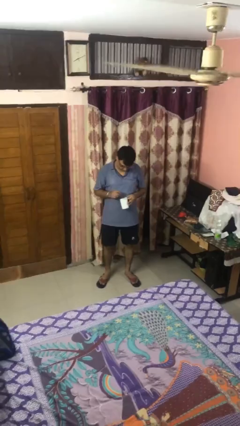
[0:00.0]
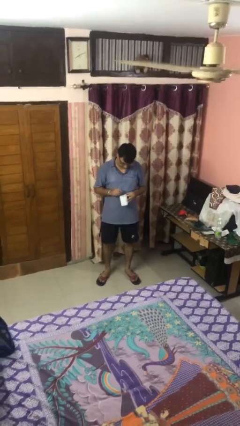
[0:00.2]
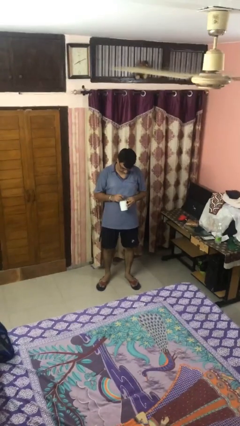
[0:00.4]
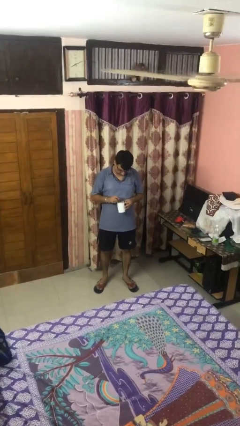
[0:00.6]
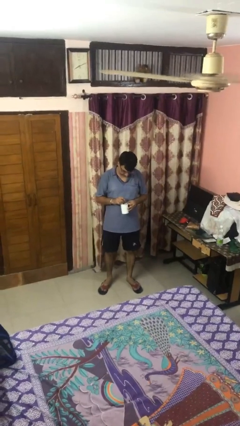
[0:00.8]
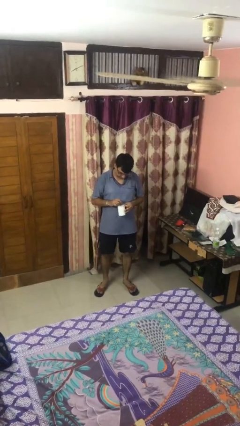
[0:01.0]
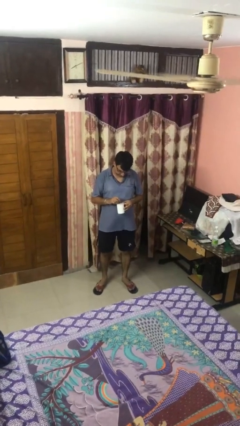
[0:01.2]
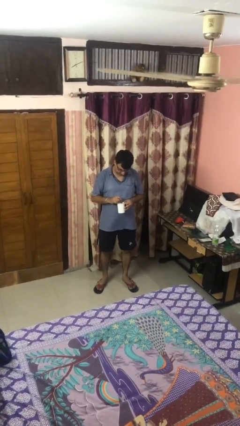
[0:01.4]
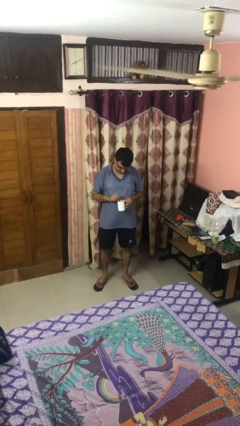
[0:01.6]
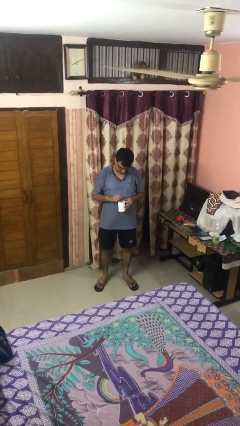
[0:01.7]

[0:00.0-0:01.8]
person stirs mug

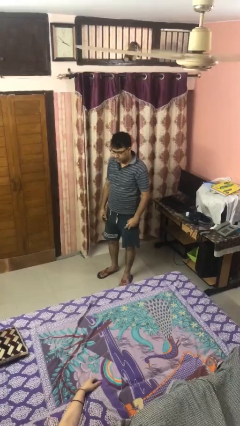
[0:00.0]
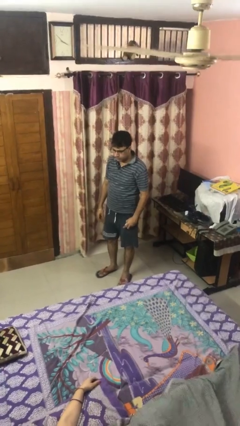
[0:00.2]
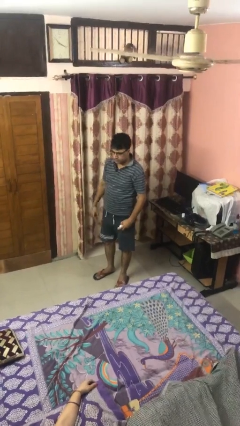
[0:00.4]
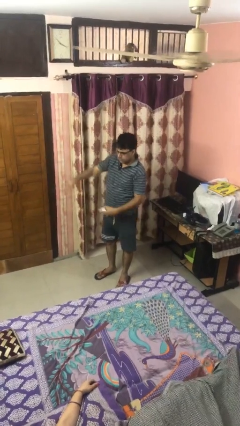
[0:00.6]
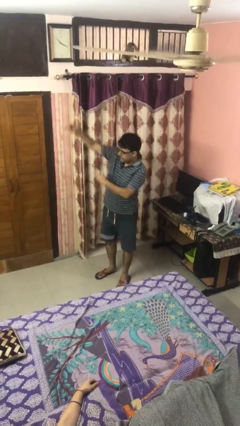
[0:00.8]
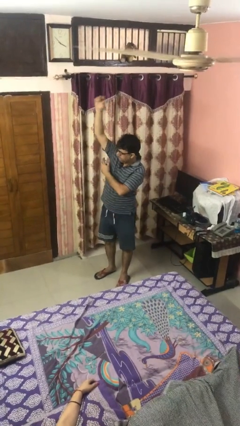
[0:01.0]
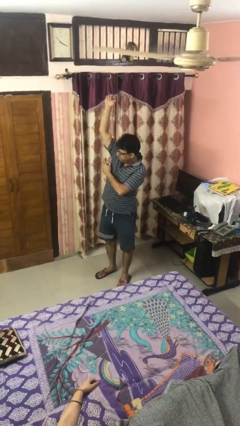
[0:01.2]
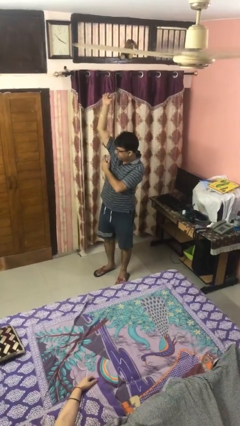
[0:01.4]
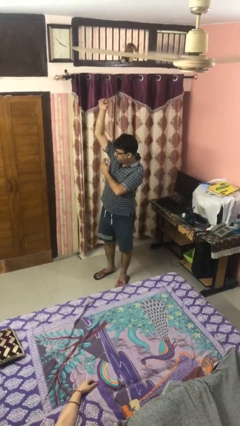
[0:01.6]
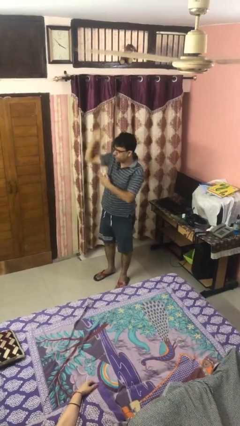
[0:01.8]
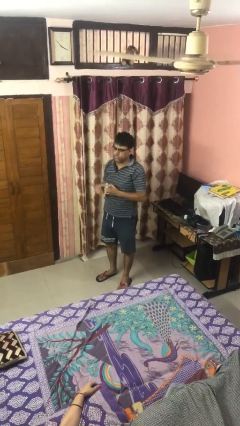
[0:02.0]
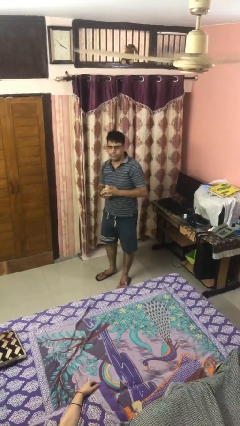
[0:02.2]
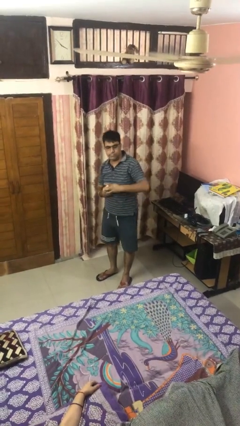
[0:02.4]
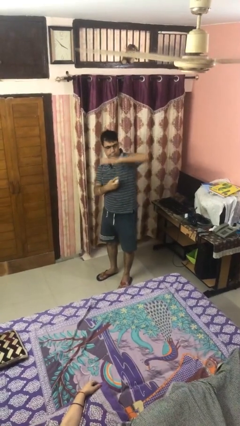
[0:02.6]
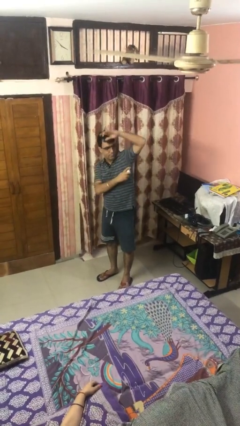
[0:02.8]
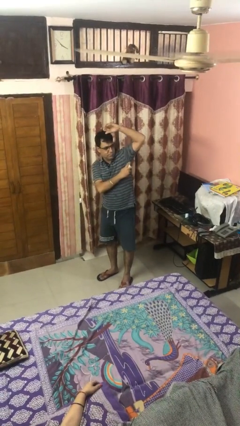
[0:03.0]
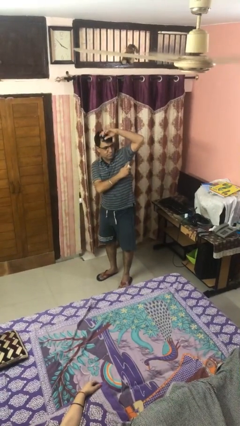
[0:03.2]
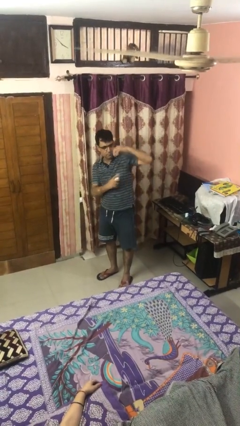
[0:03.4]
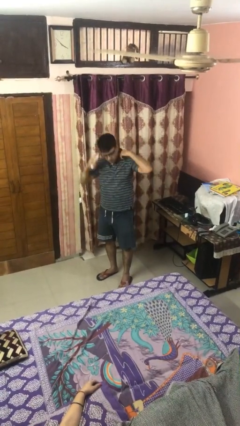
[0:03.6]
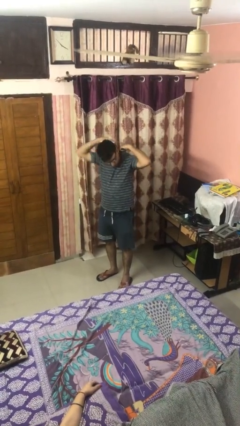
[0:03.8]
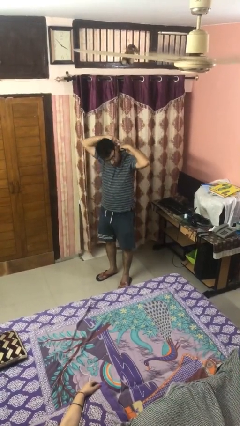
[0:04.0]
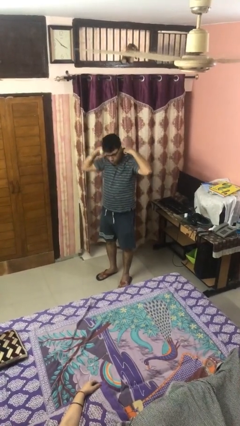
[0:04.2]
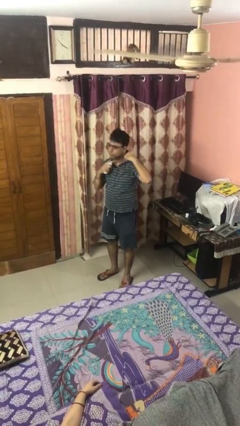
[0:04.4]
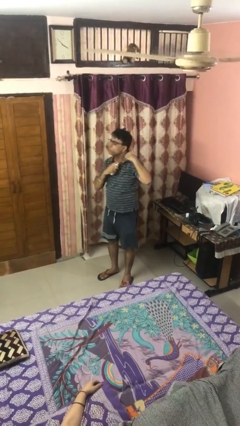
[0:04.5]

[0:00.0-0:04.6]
person applies deodorant

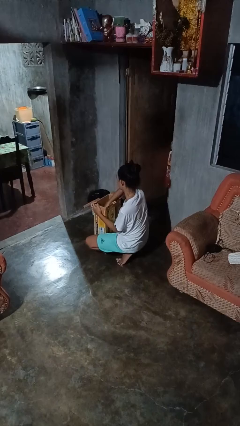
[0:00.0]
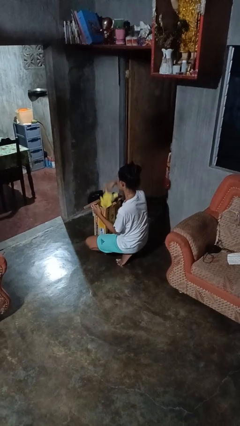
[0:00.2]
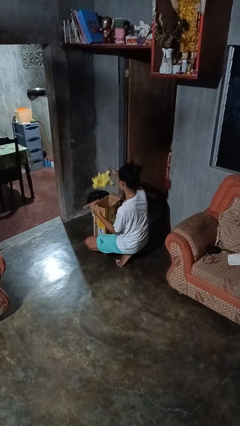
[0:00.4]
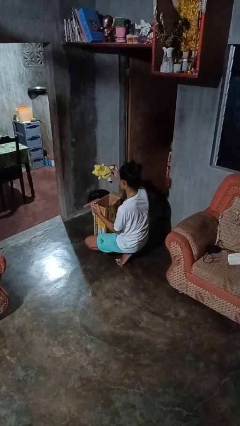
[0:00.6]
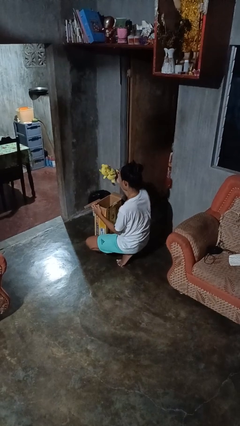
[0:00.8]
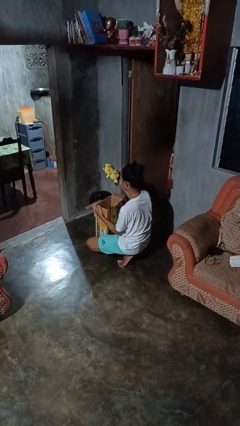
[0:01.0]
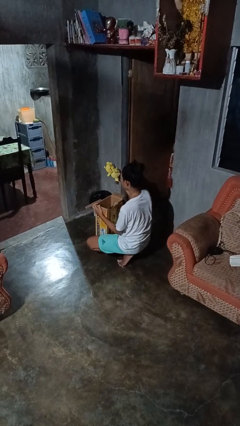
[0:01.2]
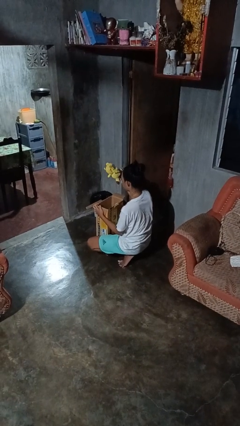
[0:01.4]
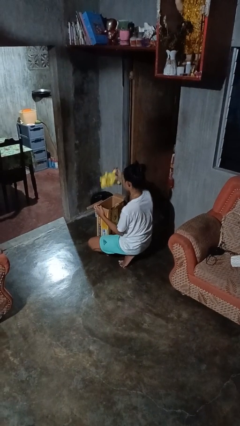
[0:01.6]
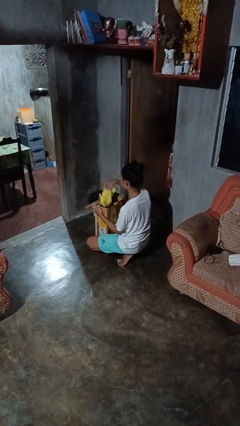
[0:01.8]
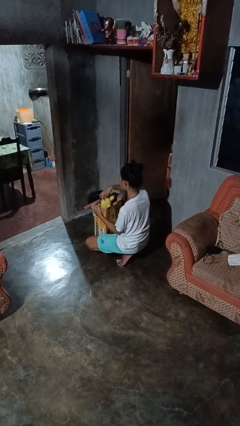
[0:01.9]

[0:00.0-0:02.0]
person takes object from box

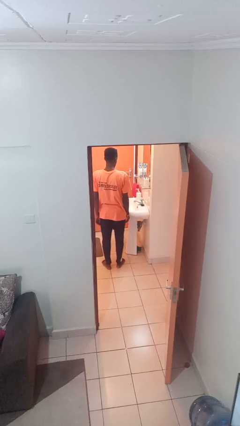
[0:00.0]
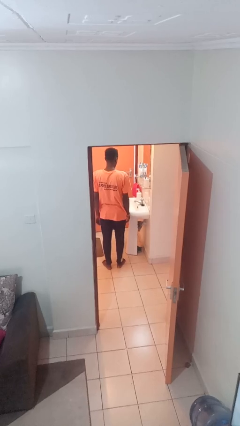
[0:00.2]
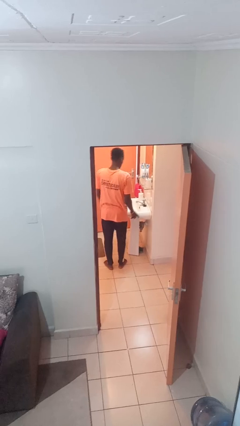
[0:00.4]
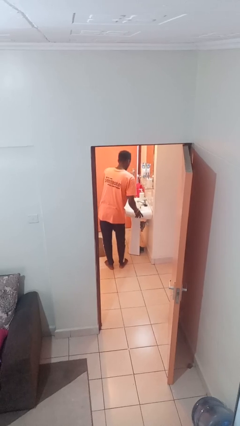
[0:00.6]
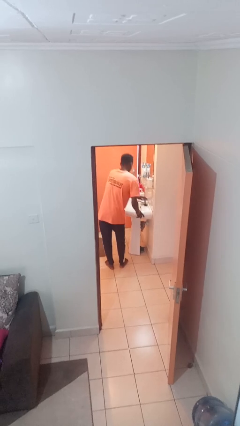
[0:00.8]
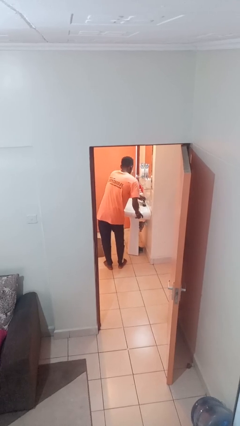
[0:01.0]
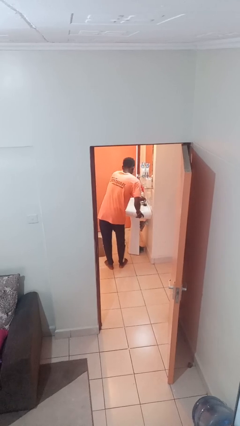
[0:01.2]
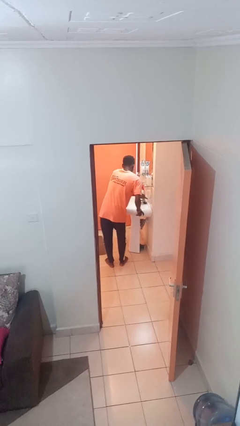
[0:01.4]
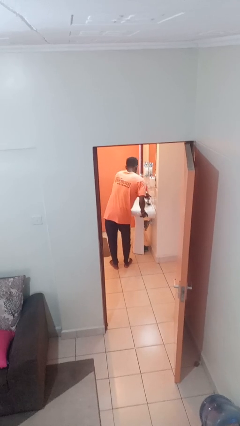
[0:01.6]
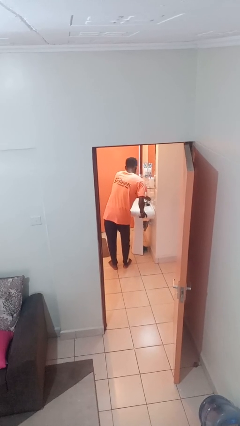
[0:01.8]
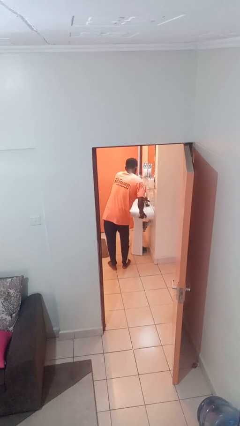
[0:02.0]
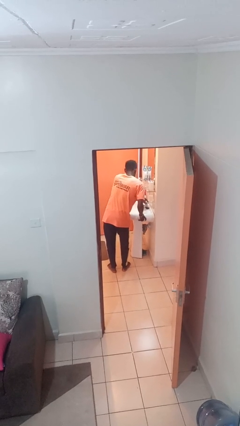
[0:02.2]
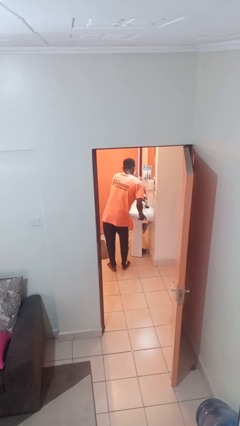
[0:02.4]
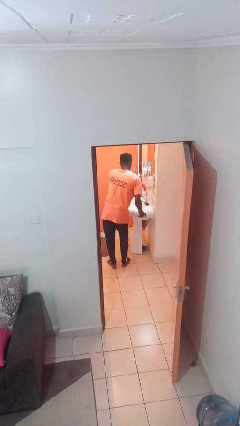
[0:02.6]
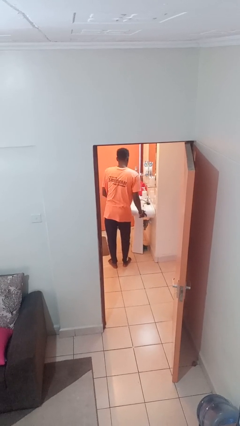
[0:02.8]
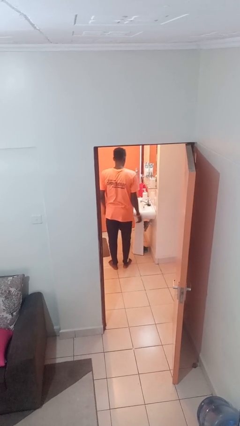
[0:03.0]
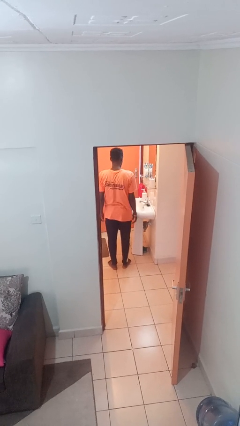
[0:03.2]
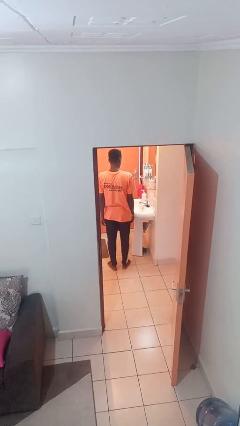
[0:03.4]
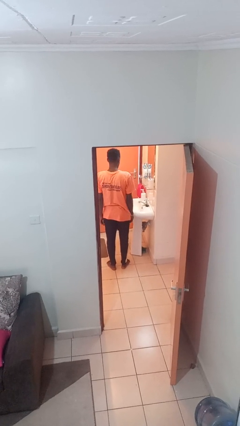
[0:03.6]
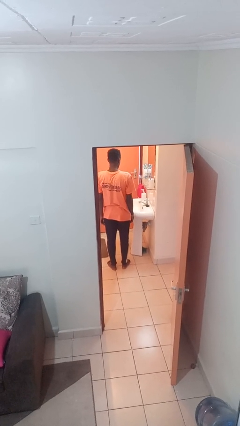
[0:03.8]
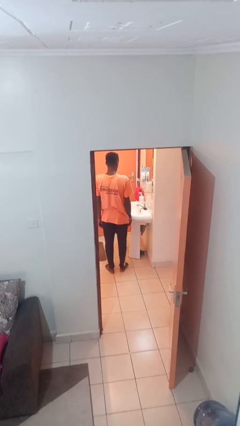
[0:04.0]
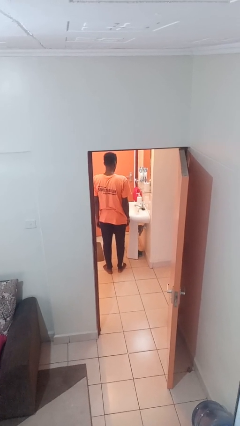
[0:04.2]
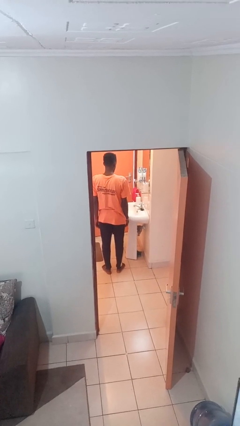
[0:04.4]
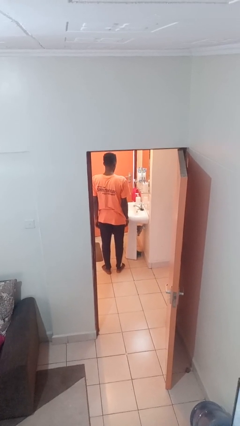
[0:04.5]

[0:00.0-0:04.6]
person turns on faucet

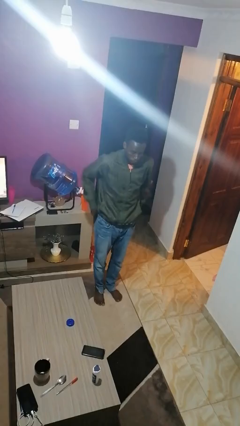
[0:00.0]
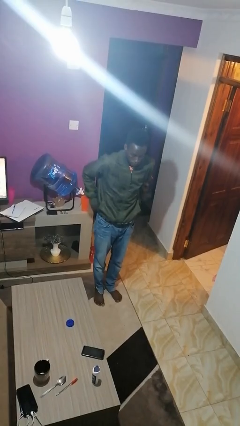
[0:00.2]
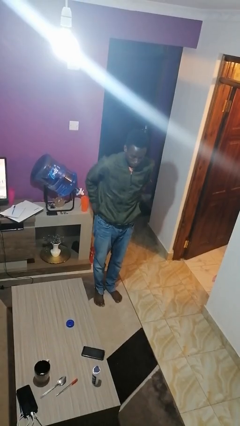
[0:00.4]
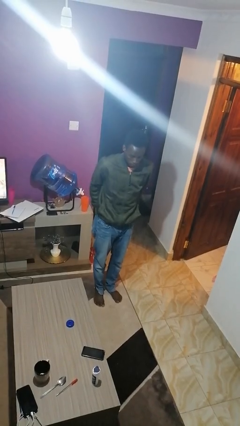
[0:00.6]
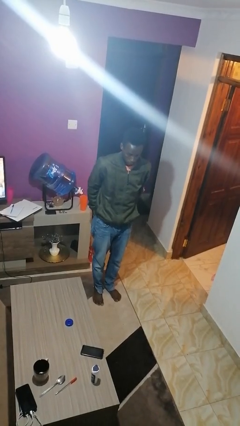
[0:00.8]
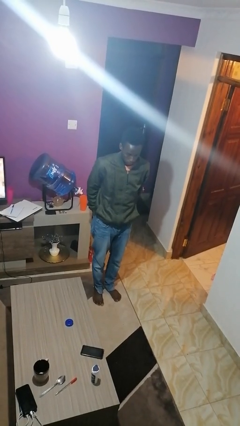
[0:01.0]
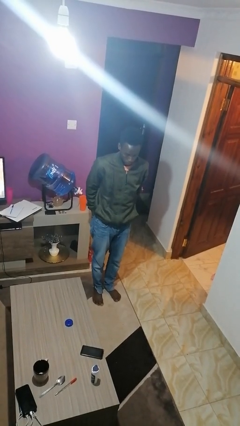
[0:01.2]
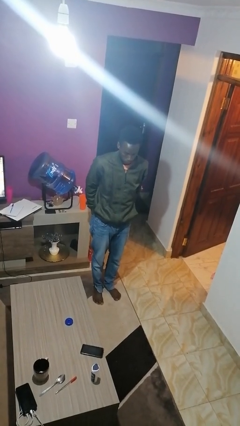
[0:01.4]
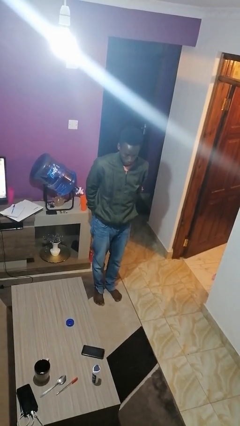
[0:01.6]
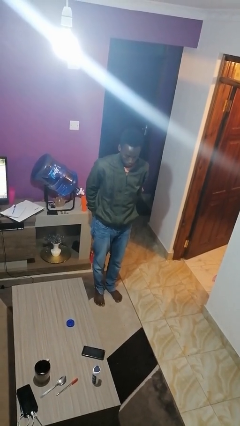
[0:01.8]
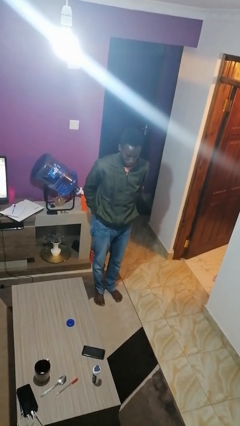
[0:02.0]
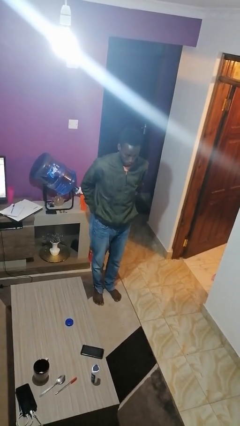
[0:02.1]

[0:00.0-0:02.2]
person puts hands in back pockets

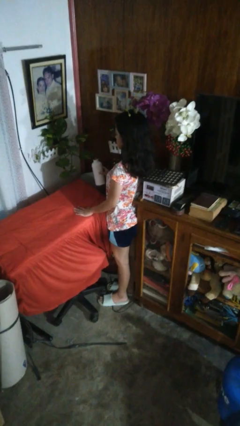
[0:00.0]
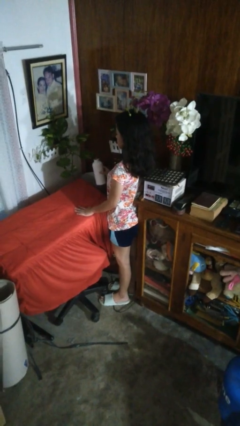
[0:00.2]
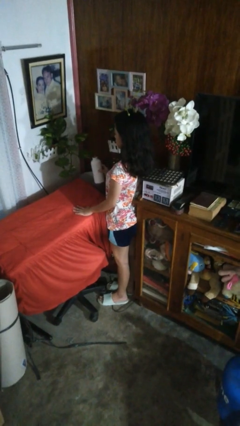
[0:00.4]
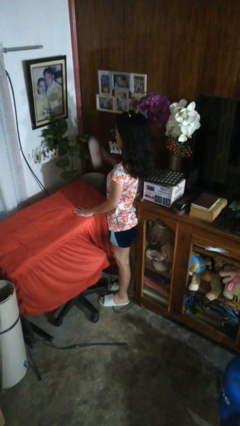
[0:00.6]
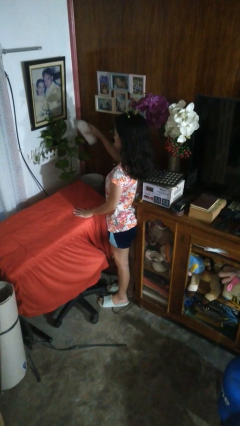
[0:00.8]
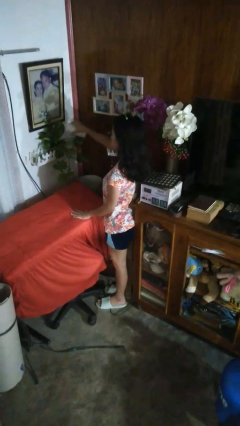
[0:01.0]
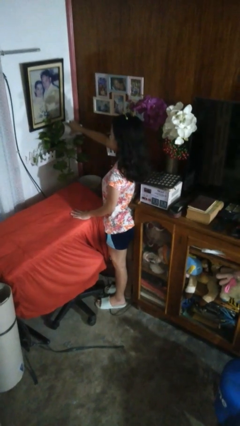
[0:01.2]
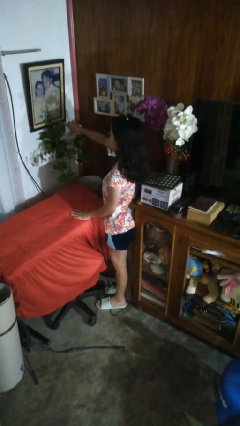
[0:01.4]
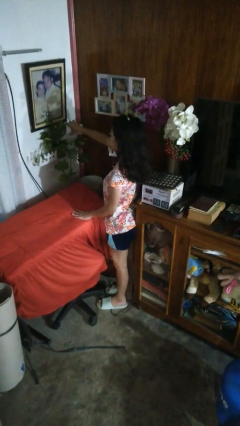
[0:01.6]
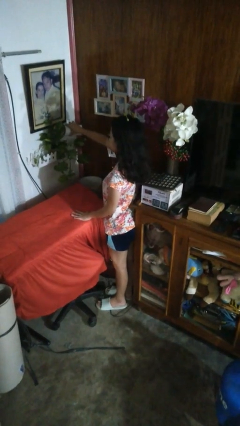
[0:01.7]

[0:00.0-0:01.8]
person waters houseplant
